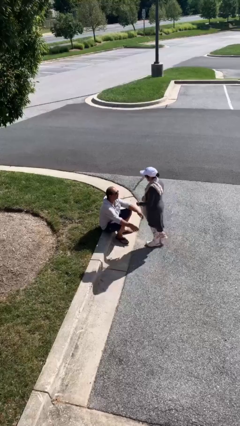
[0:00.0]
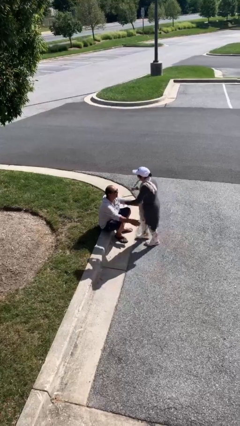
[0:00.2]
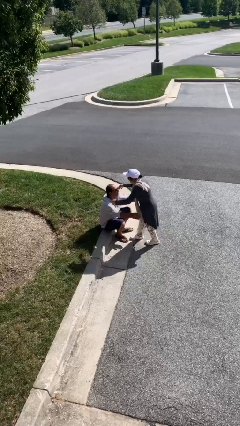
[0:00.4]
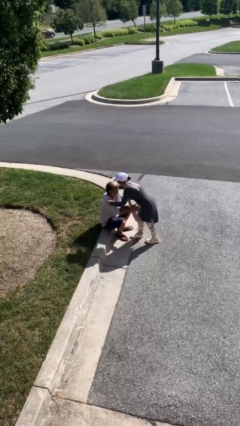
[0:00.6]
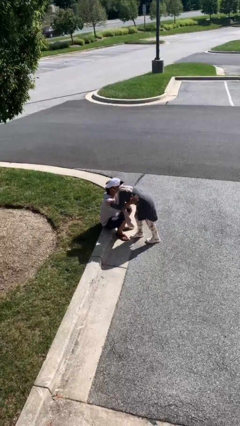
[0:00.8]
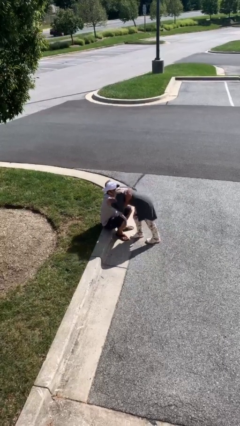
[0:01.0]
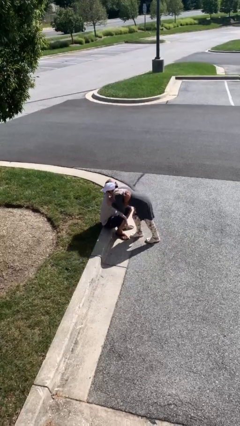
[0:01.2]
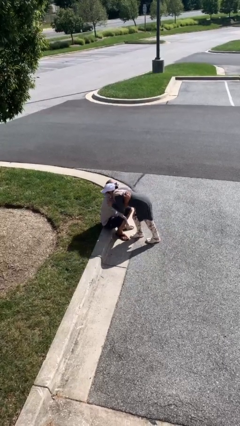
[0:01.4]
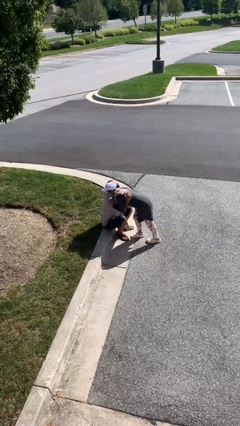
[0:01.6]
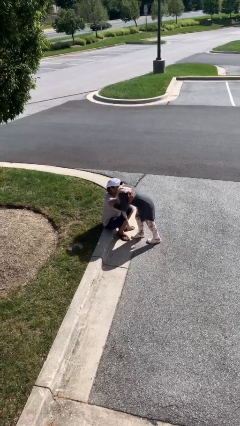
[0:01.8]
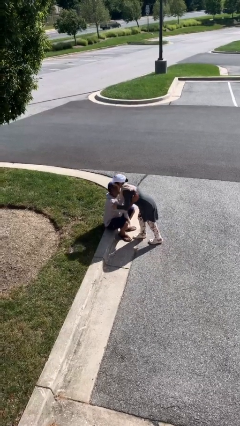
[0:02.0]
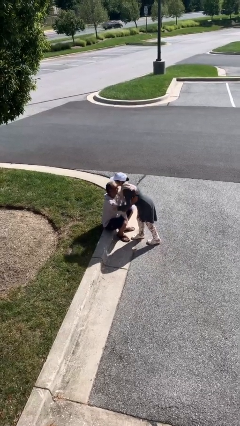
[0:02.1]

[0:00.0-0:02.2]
person embraces person

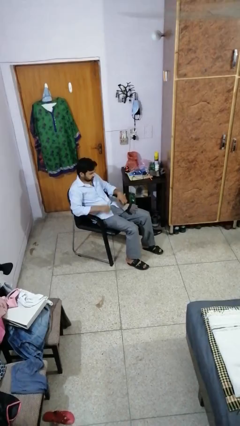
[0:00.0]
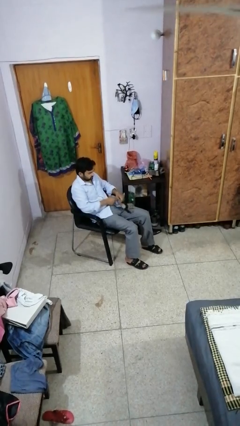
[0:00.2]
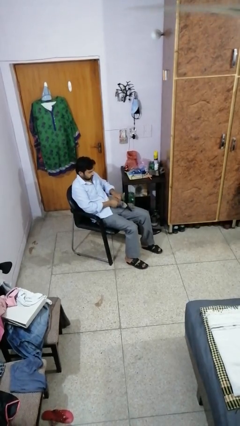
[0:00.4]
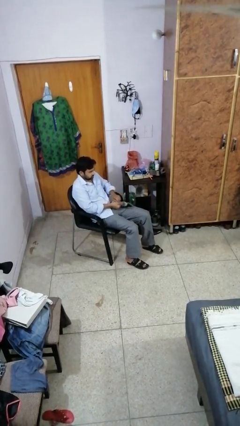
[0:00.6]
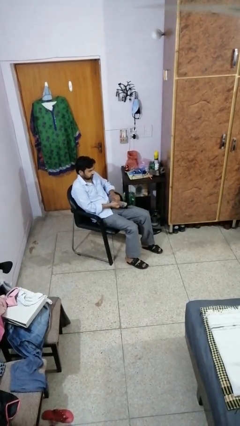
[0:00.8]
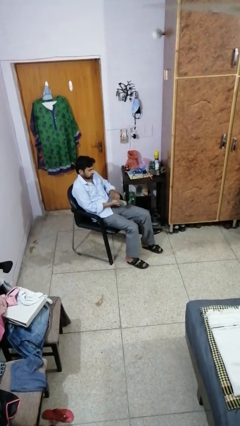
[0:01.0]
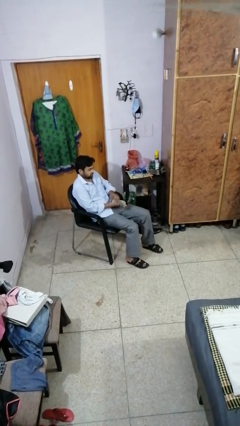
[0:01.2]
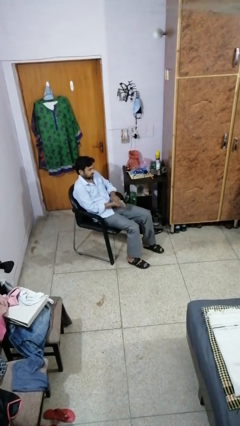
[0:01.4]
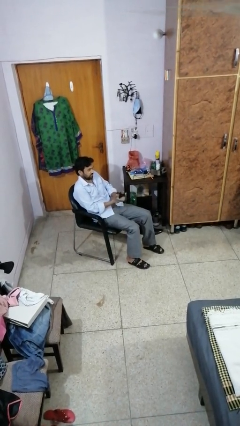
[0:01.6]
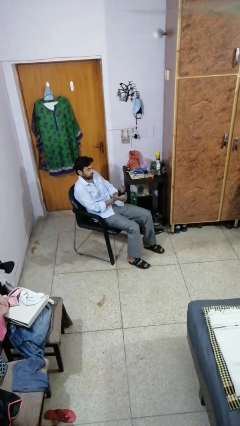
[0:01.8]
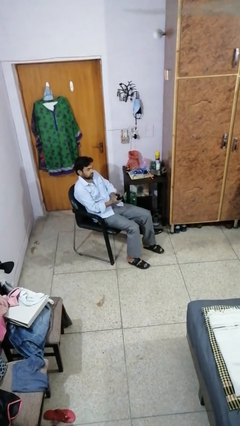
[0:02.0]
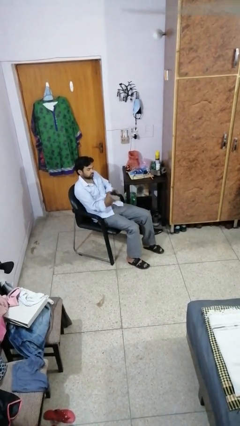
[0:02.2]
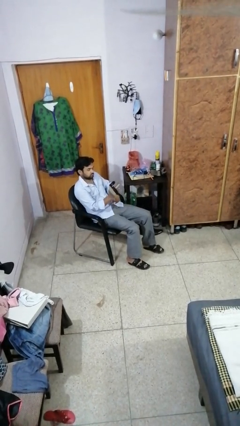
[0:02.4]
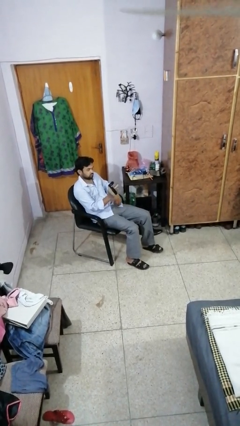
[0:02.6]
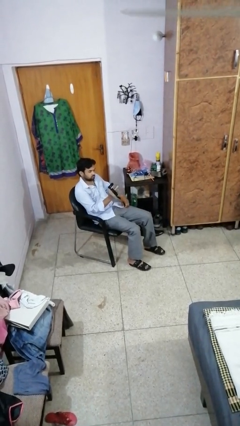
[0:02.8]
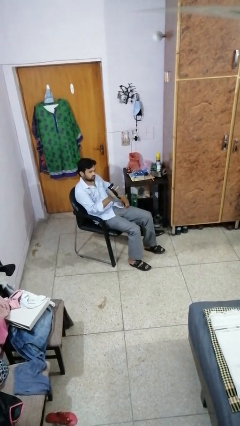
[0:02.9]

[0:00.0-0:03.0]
person puts on gloves

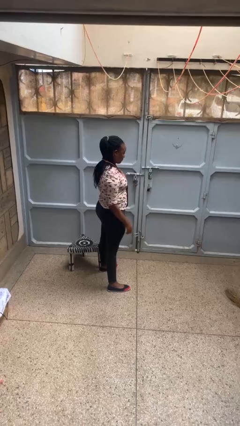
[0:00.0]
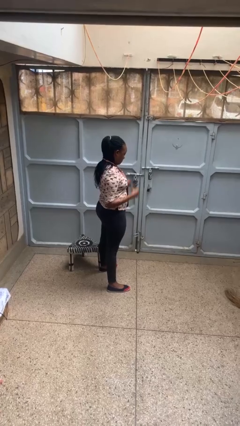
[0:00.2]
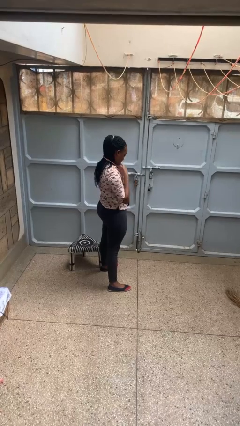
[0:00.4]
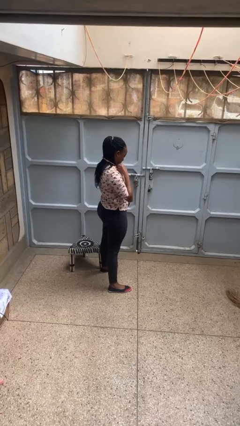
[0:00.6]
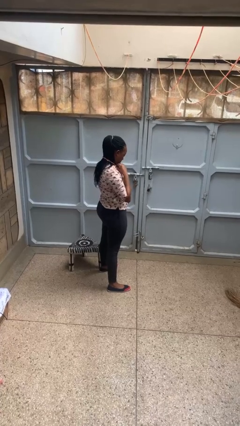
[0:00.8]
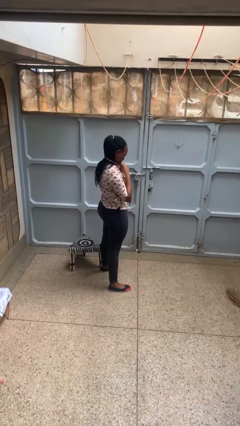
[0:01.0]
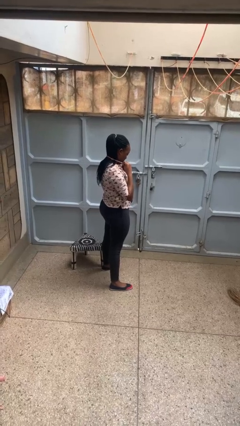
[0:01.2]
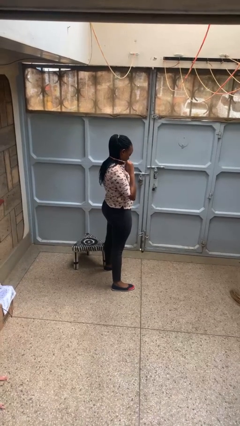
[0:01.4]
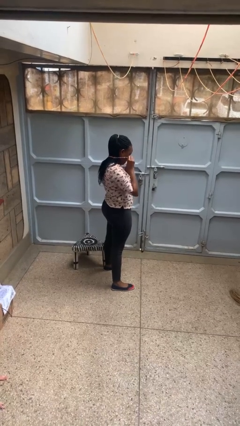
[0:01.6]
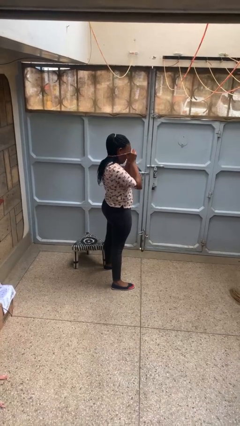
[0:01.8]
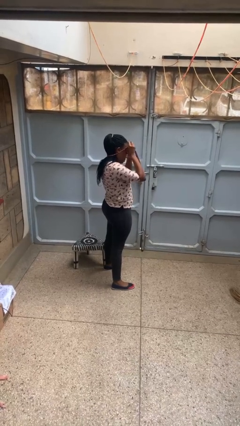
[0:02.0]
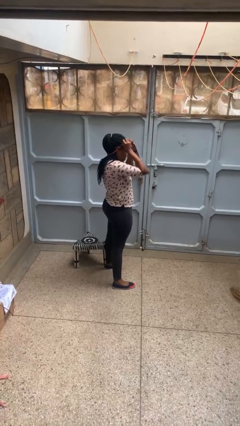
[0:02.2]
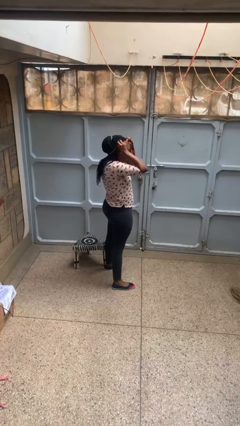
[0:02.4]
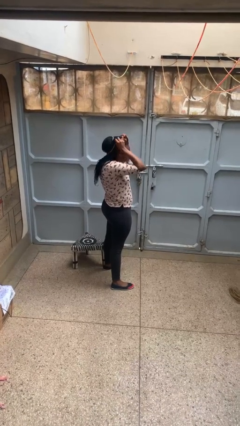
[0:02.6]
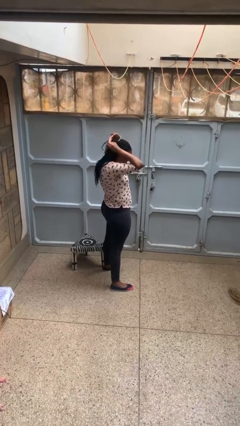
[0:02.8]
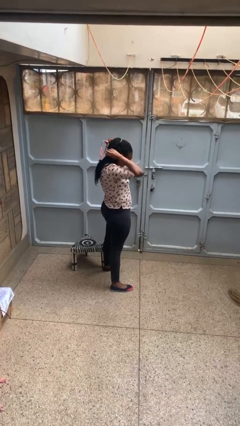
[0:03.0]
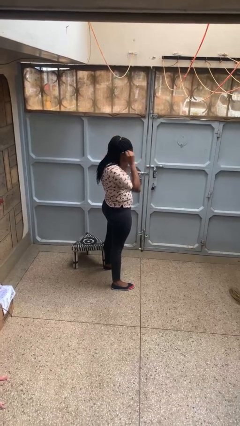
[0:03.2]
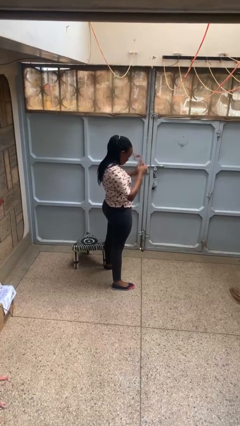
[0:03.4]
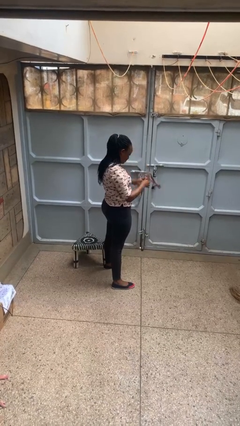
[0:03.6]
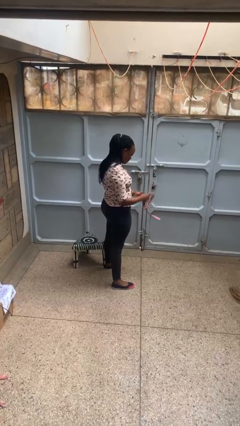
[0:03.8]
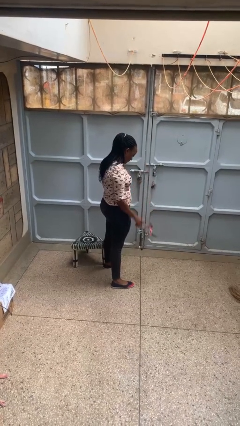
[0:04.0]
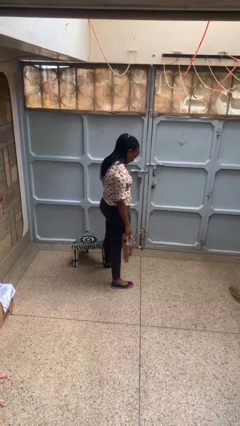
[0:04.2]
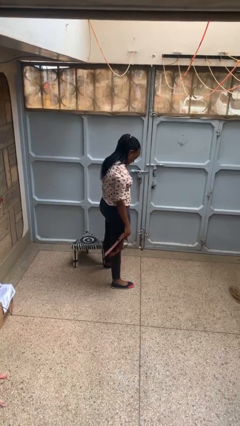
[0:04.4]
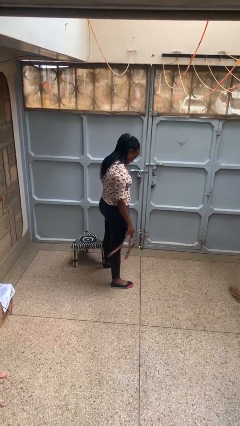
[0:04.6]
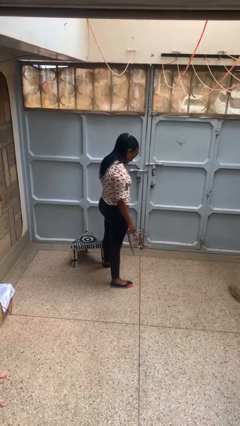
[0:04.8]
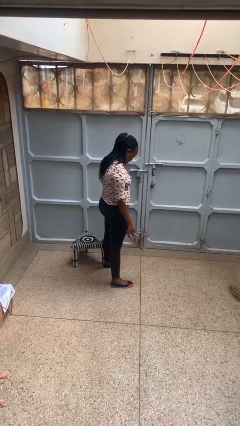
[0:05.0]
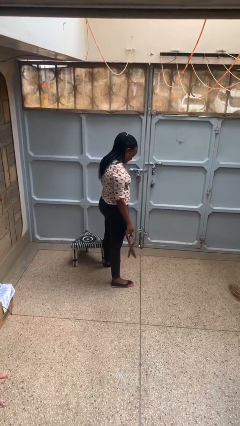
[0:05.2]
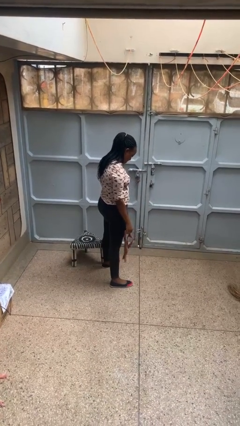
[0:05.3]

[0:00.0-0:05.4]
person takes off necktie

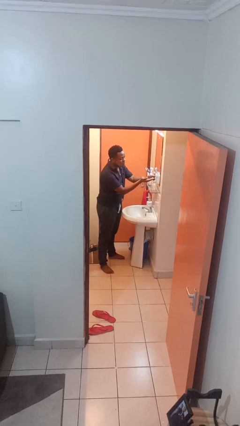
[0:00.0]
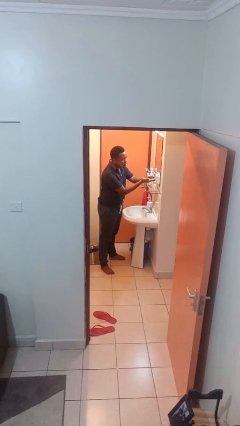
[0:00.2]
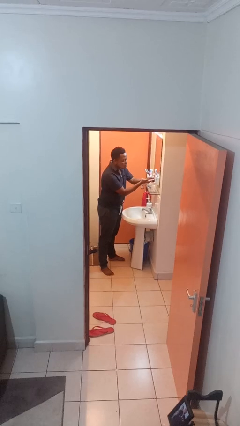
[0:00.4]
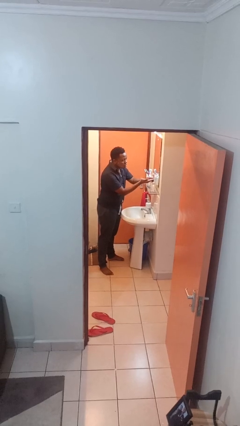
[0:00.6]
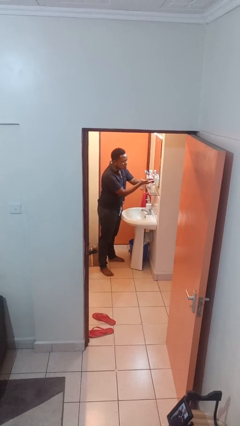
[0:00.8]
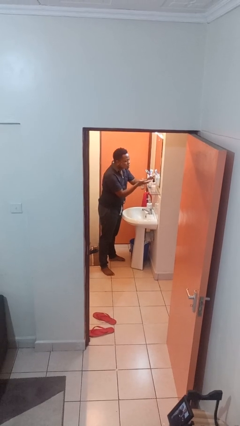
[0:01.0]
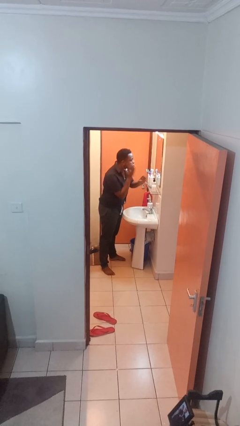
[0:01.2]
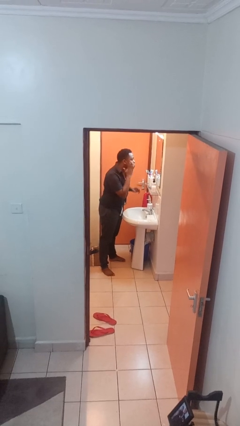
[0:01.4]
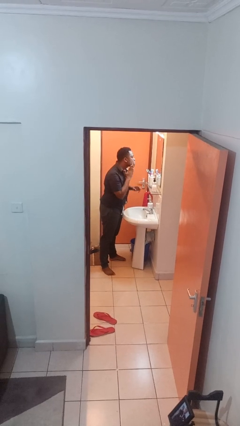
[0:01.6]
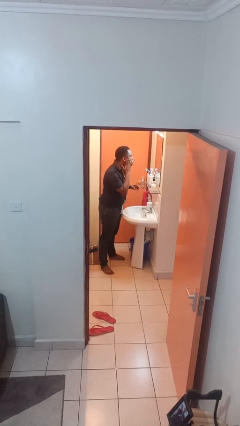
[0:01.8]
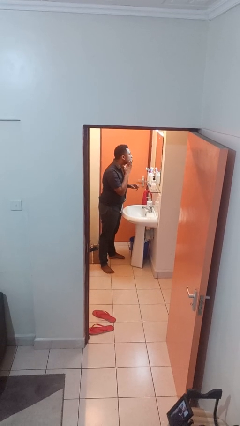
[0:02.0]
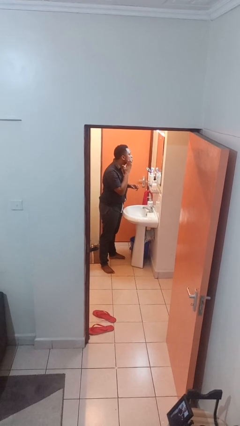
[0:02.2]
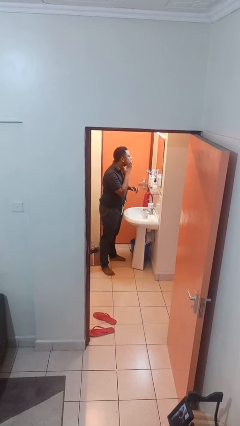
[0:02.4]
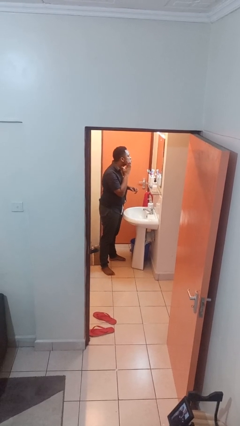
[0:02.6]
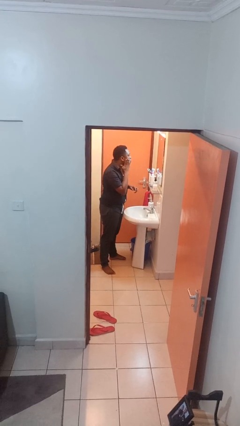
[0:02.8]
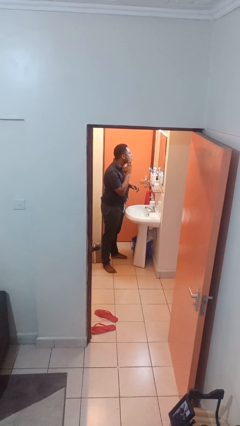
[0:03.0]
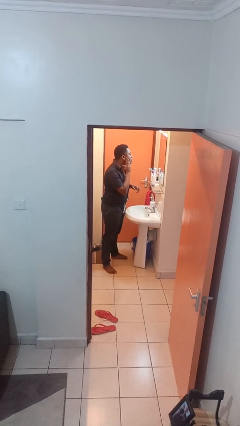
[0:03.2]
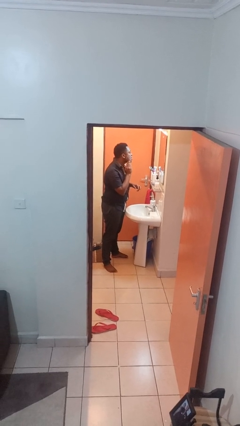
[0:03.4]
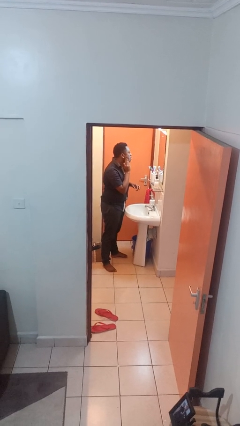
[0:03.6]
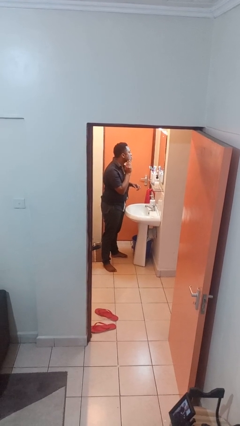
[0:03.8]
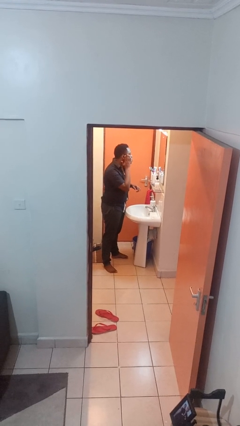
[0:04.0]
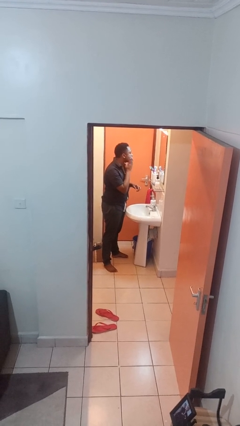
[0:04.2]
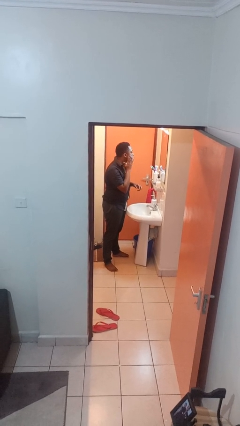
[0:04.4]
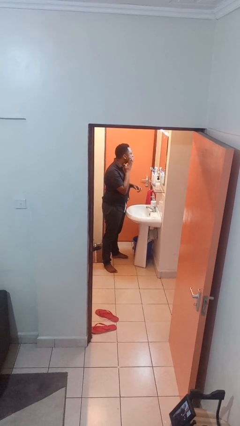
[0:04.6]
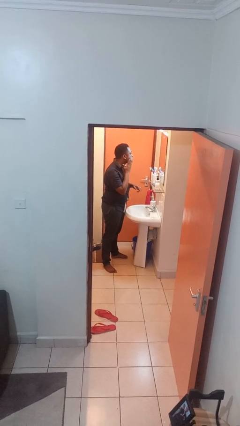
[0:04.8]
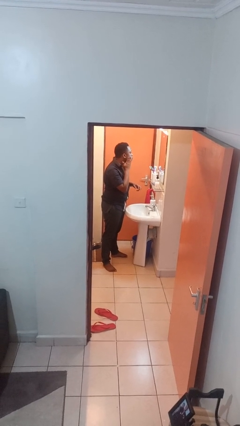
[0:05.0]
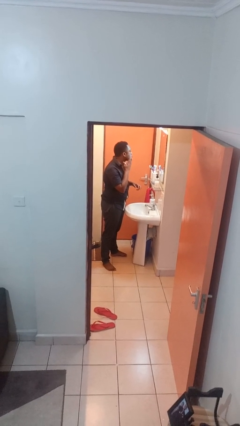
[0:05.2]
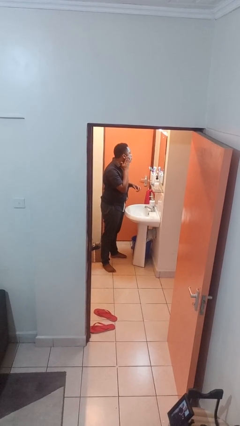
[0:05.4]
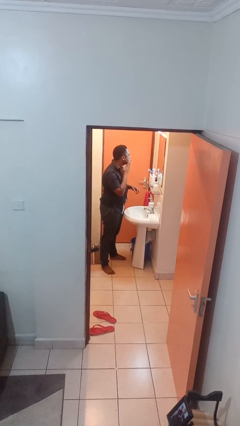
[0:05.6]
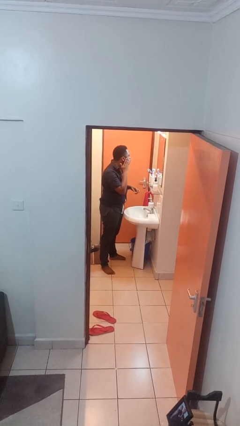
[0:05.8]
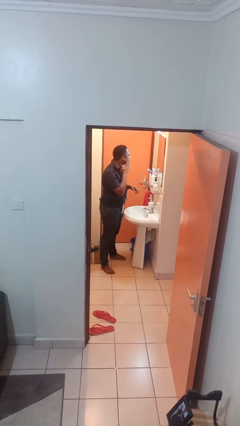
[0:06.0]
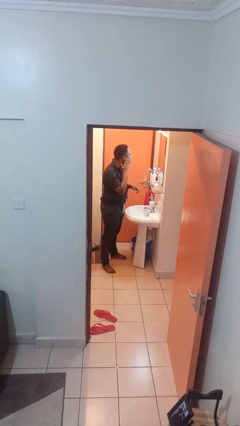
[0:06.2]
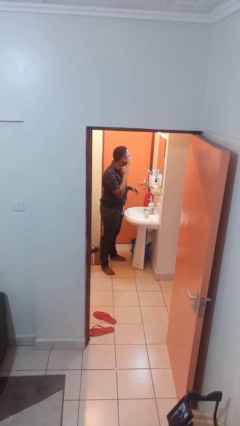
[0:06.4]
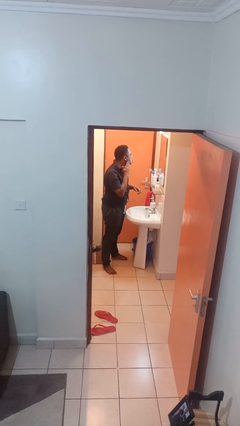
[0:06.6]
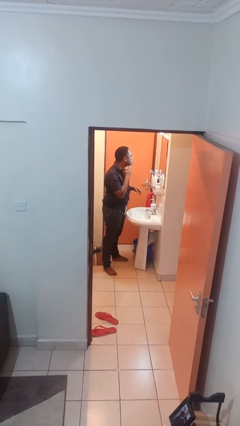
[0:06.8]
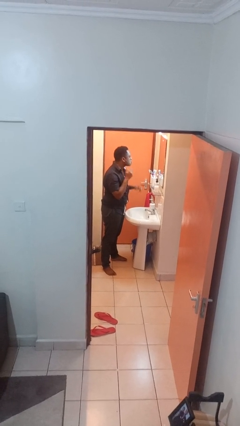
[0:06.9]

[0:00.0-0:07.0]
person applies shaving cream
